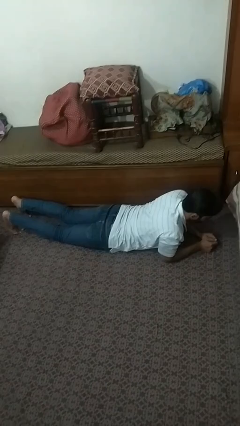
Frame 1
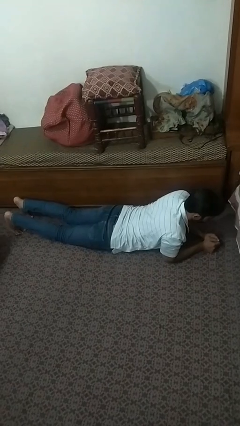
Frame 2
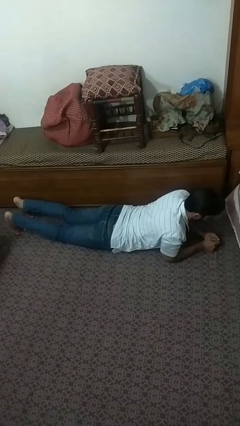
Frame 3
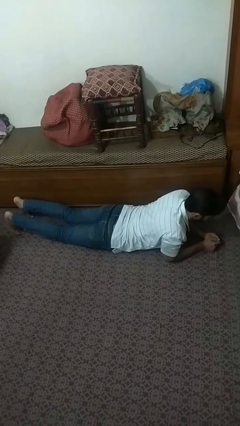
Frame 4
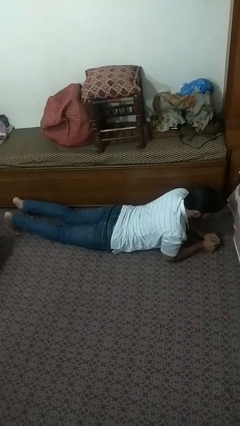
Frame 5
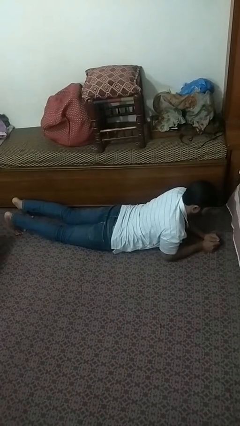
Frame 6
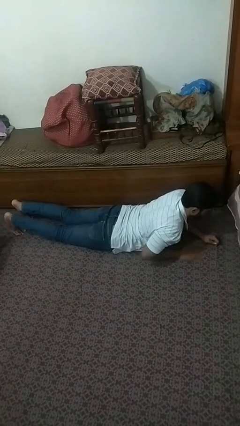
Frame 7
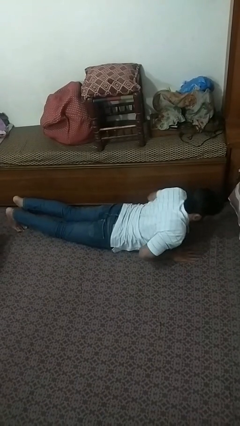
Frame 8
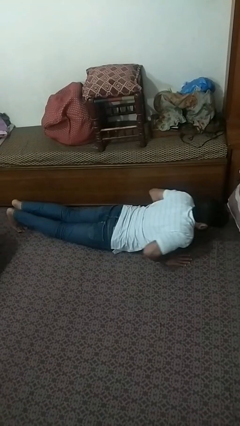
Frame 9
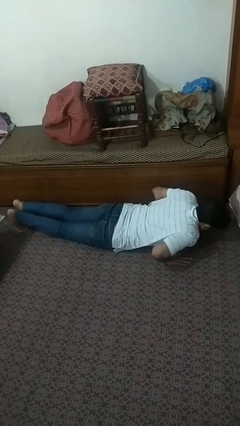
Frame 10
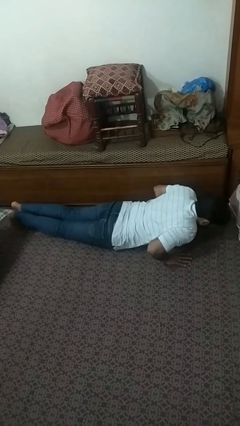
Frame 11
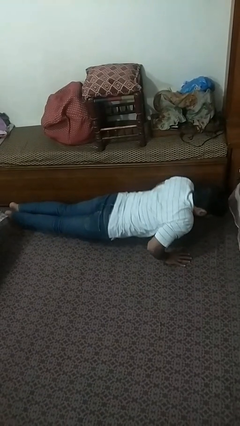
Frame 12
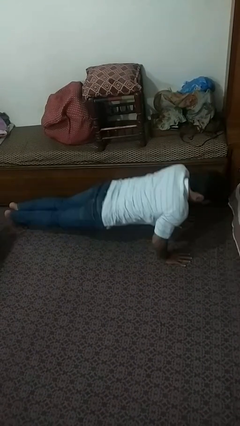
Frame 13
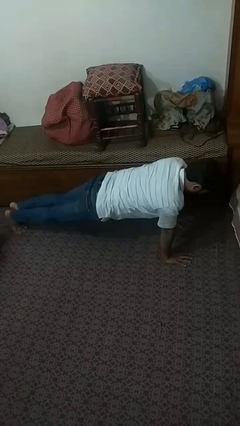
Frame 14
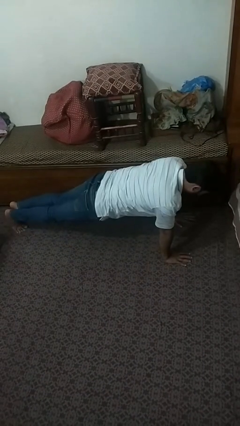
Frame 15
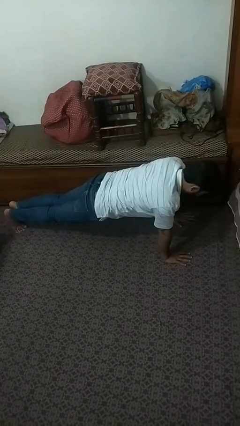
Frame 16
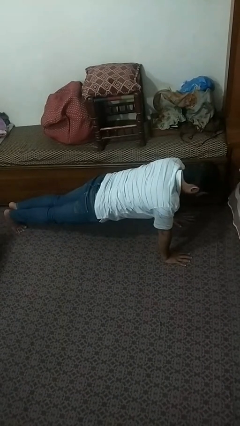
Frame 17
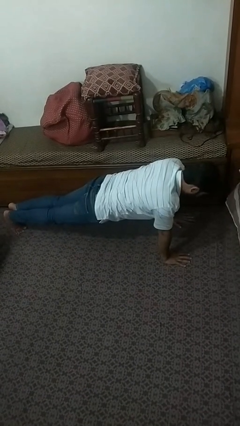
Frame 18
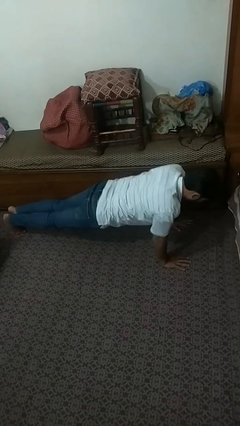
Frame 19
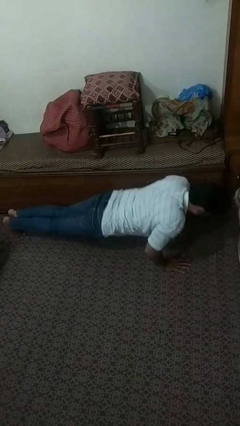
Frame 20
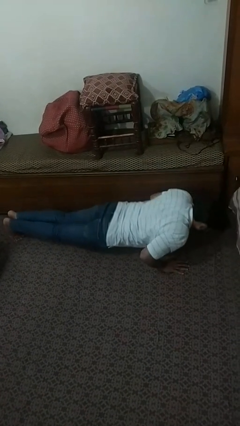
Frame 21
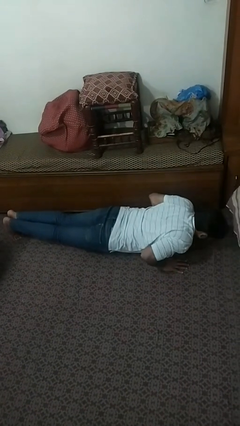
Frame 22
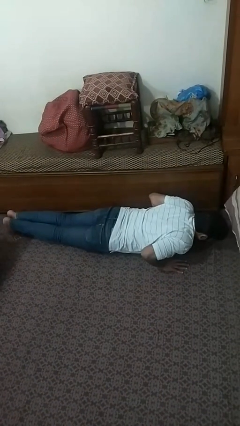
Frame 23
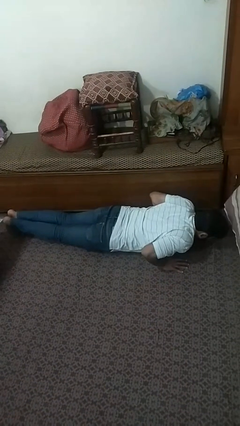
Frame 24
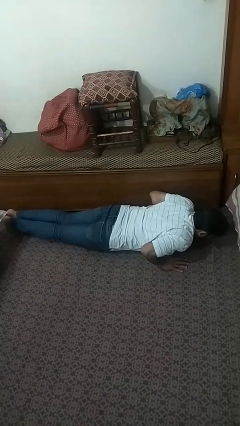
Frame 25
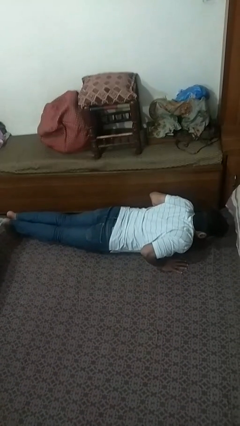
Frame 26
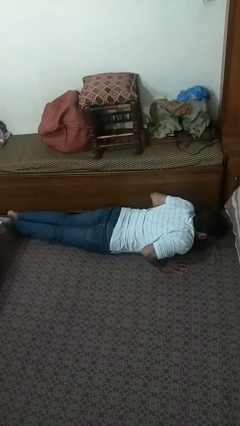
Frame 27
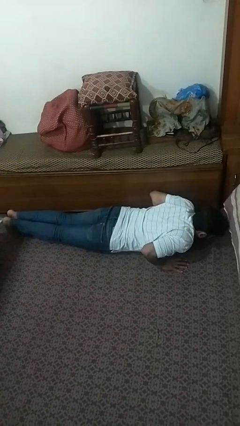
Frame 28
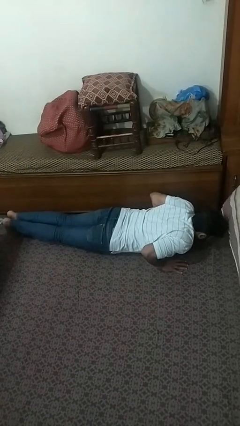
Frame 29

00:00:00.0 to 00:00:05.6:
person exercises with pushup

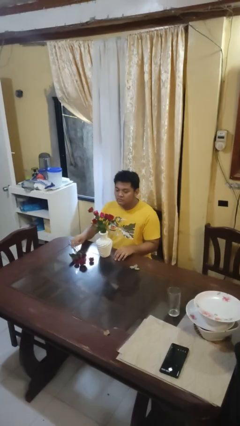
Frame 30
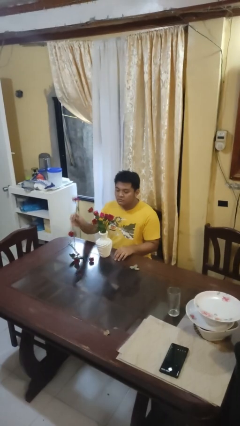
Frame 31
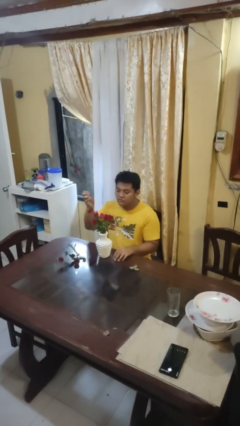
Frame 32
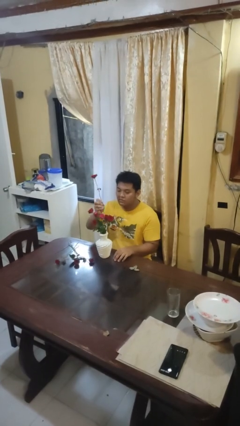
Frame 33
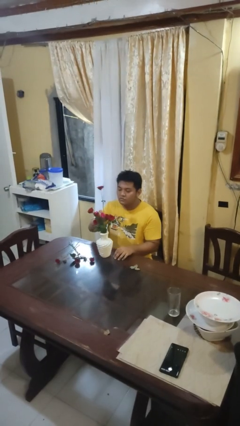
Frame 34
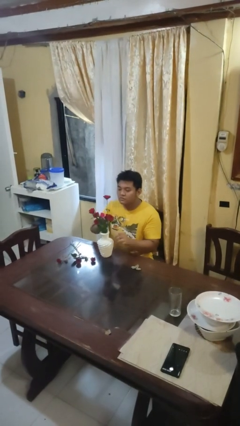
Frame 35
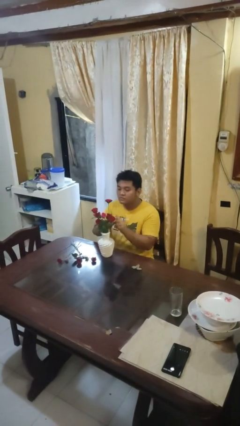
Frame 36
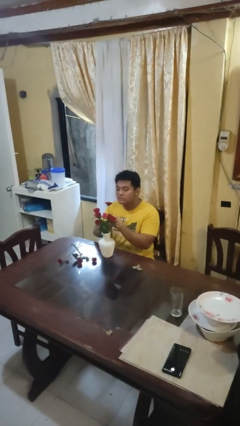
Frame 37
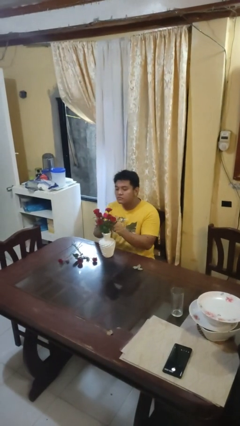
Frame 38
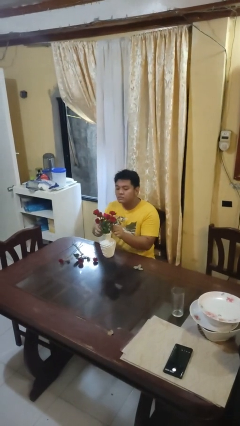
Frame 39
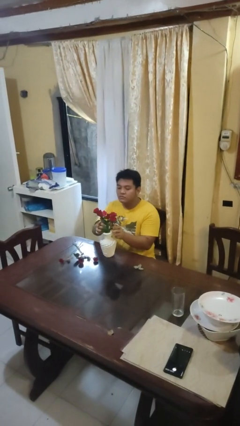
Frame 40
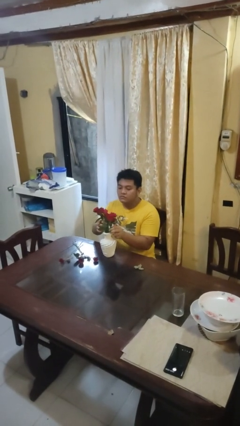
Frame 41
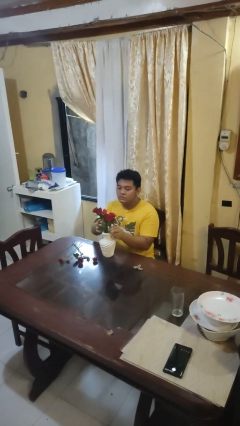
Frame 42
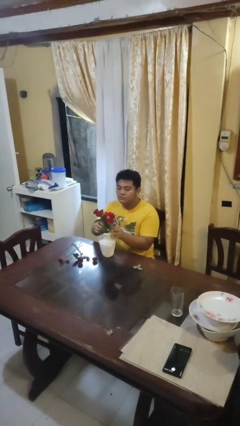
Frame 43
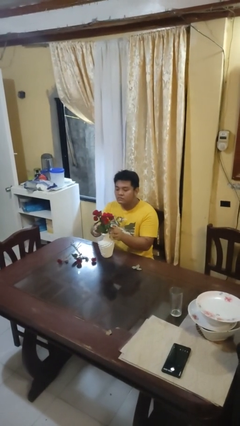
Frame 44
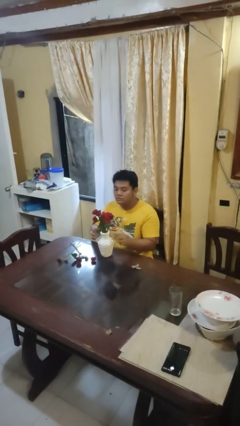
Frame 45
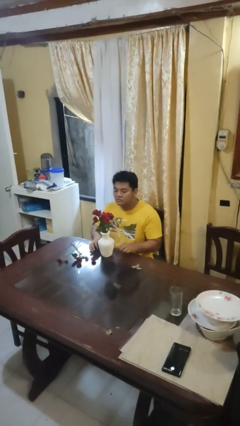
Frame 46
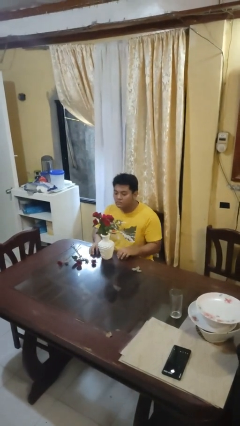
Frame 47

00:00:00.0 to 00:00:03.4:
person arranges flowers in vase

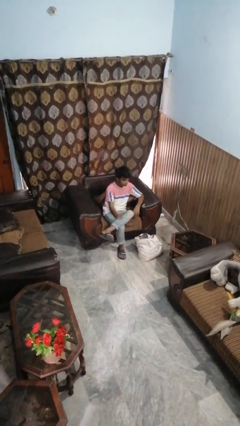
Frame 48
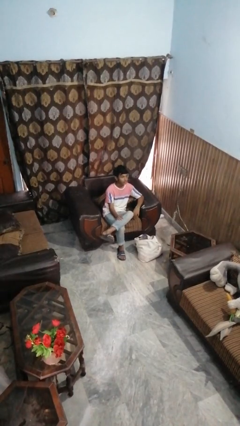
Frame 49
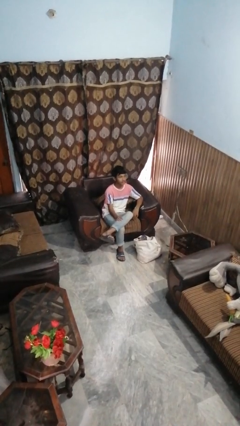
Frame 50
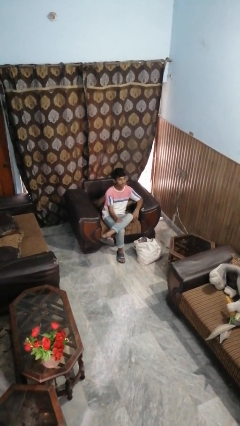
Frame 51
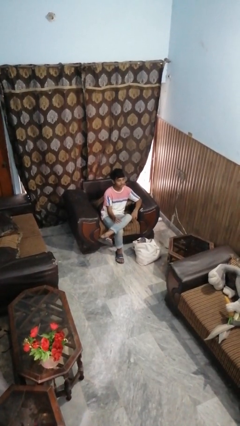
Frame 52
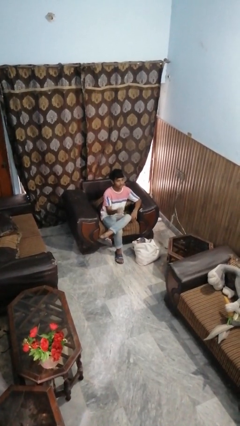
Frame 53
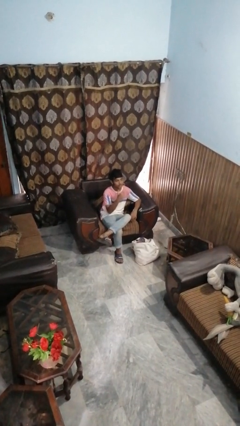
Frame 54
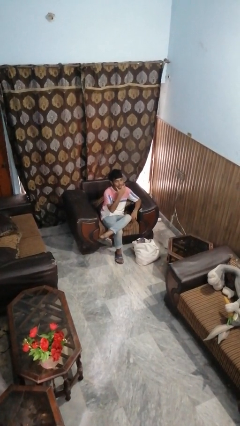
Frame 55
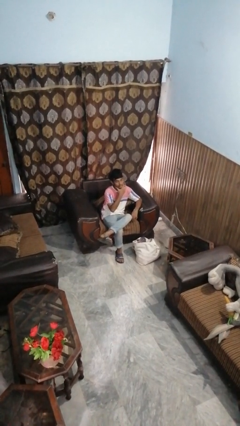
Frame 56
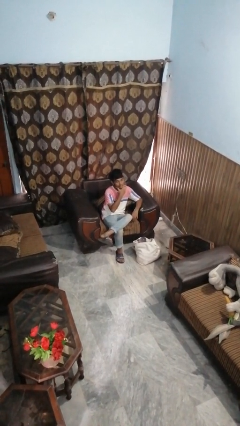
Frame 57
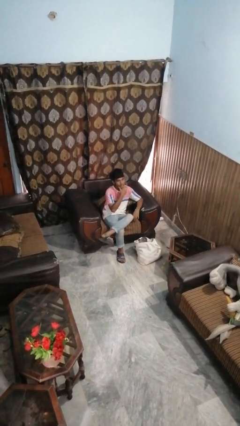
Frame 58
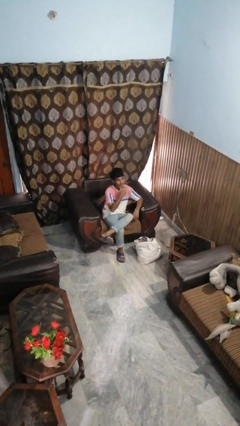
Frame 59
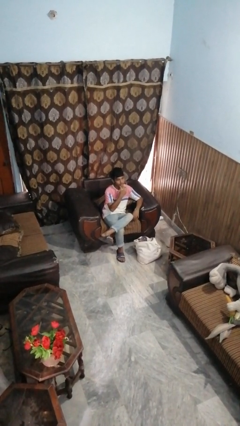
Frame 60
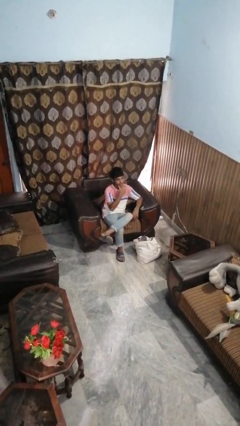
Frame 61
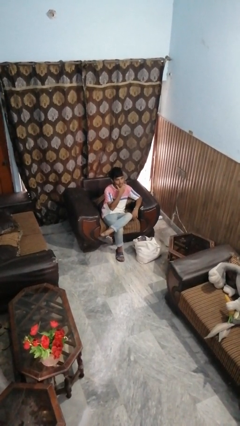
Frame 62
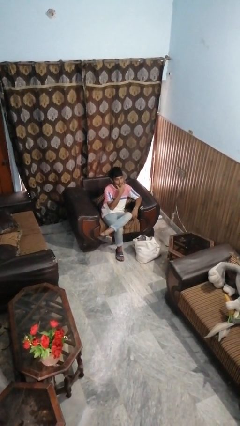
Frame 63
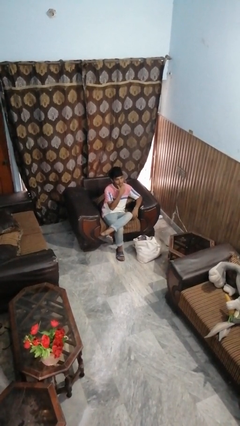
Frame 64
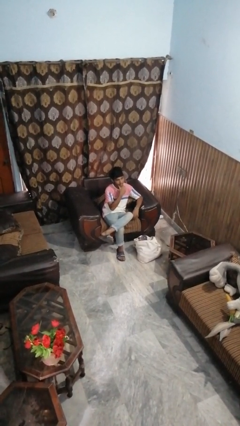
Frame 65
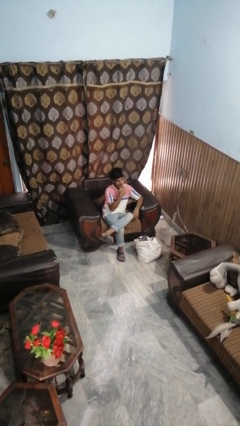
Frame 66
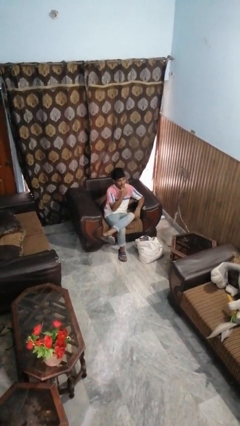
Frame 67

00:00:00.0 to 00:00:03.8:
person strokes chin

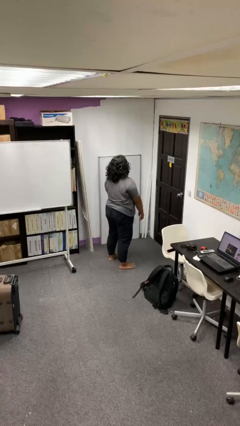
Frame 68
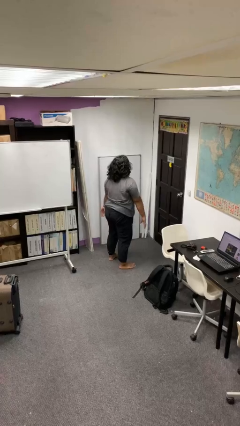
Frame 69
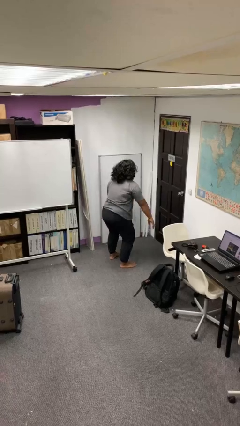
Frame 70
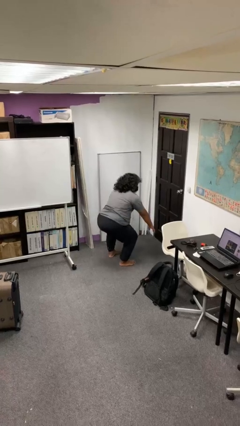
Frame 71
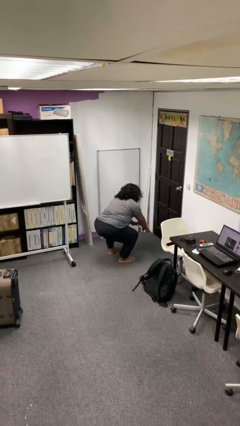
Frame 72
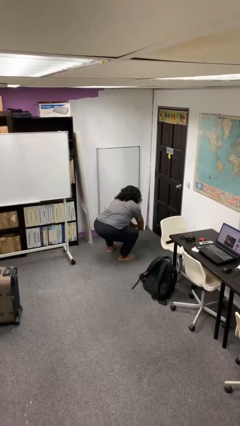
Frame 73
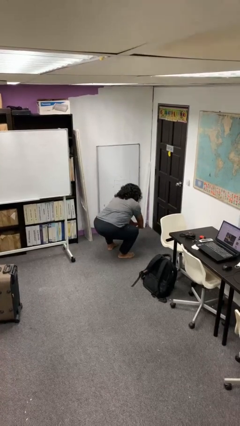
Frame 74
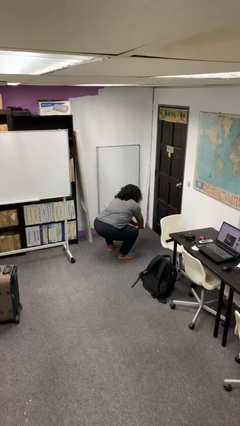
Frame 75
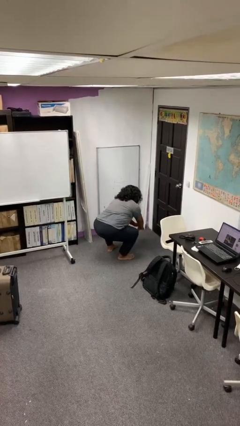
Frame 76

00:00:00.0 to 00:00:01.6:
person squats

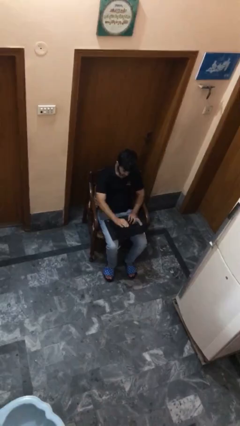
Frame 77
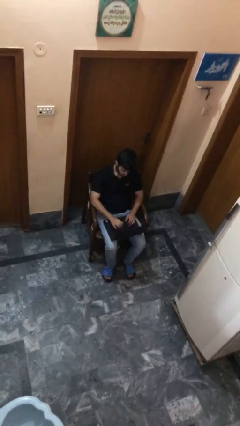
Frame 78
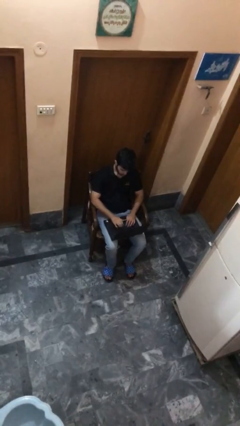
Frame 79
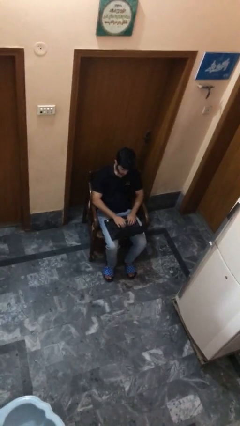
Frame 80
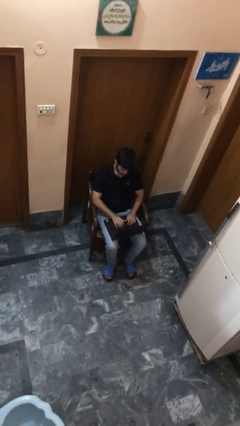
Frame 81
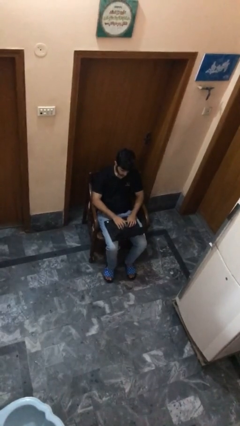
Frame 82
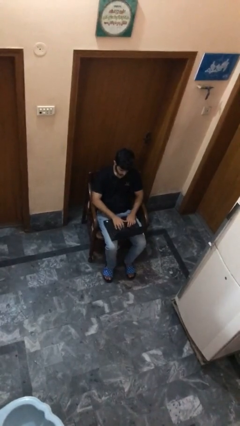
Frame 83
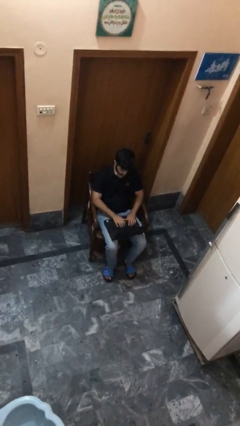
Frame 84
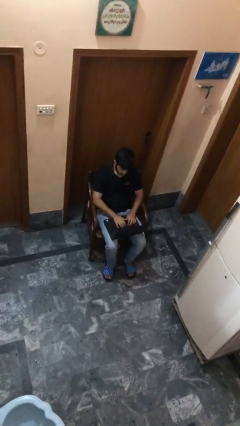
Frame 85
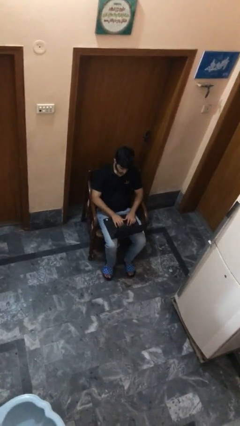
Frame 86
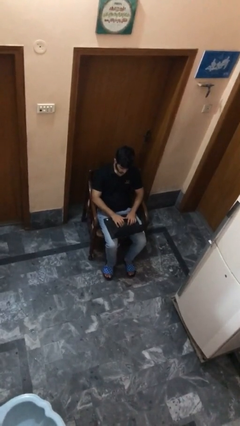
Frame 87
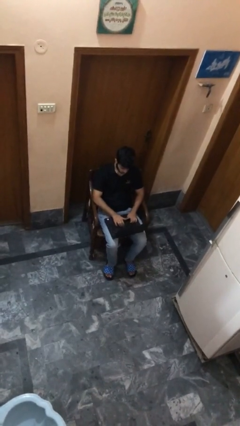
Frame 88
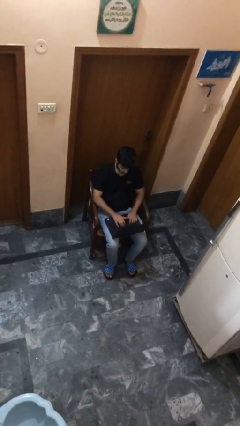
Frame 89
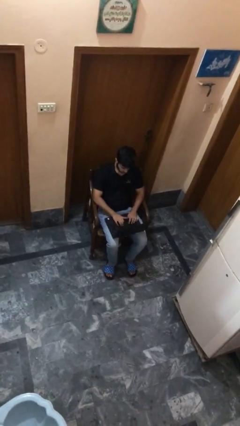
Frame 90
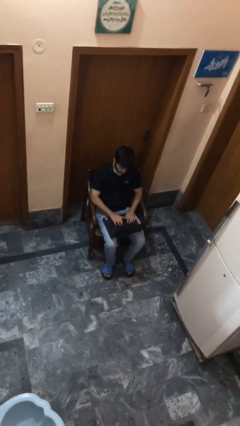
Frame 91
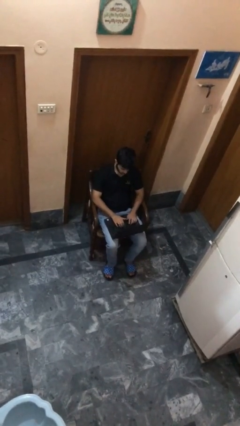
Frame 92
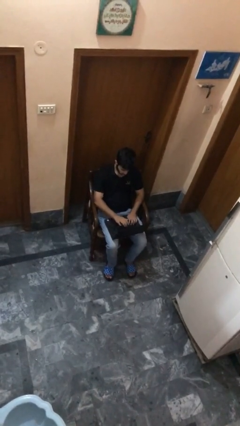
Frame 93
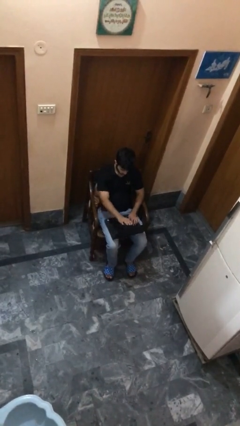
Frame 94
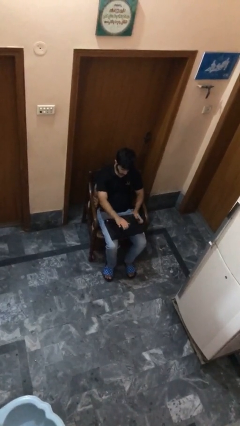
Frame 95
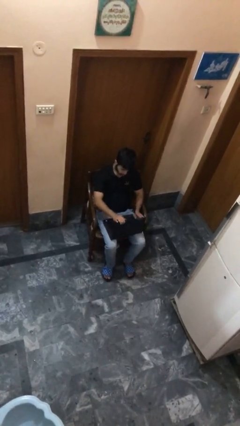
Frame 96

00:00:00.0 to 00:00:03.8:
person interacts with laptop
